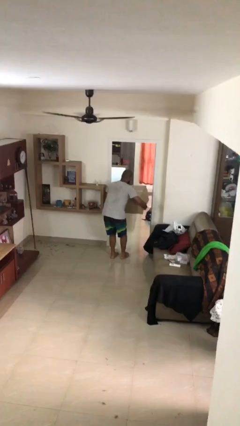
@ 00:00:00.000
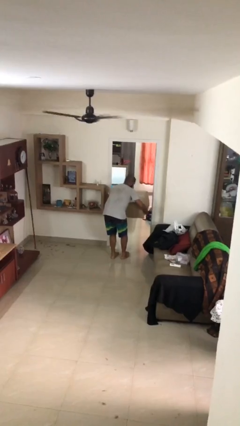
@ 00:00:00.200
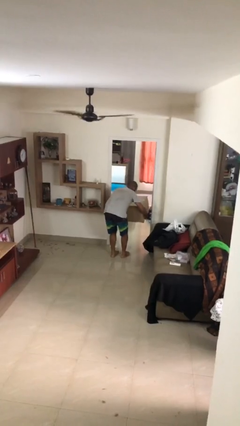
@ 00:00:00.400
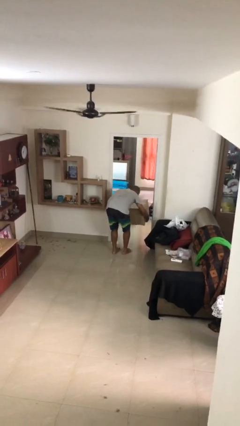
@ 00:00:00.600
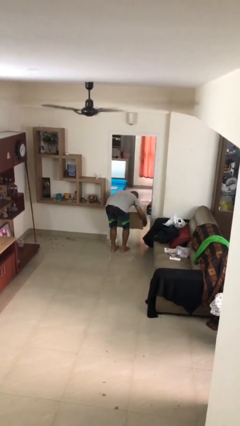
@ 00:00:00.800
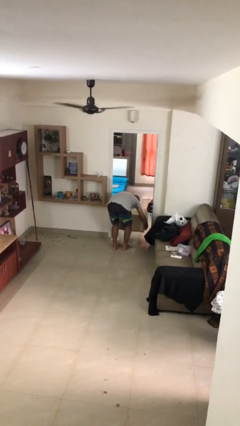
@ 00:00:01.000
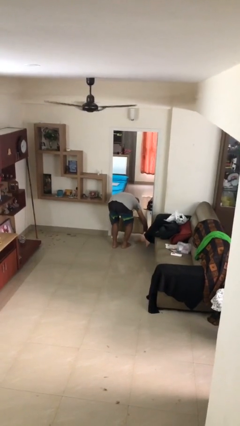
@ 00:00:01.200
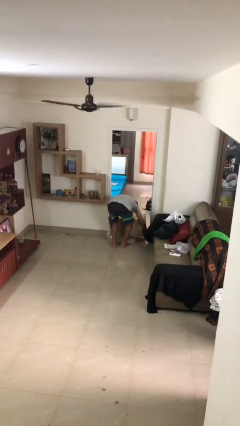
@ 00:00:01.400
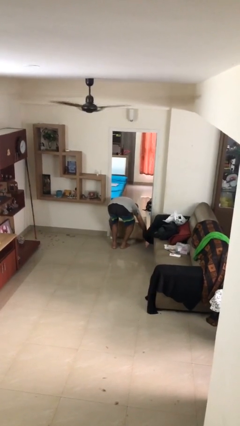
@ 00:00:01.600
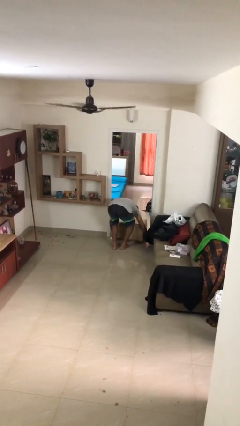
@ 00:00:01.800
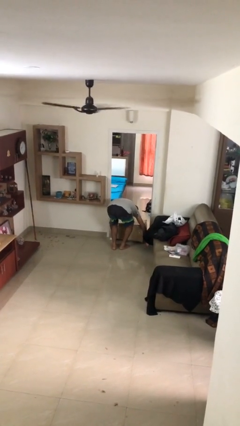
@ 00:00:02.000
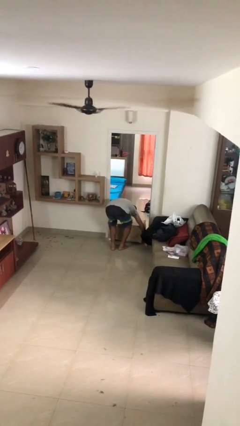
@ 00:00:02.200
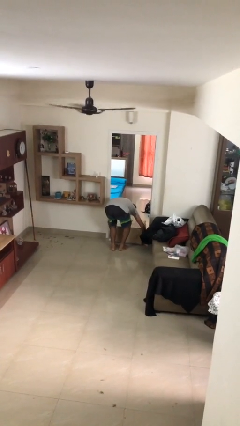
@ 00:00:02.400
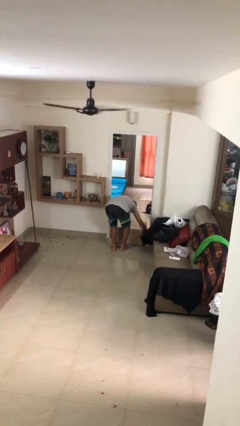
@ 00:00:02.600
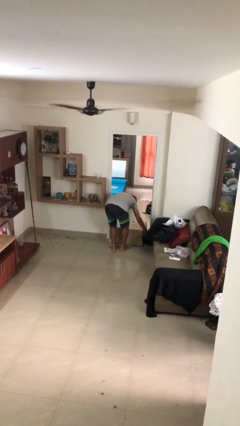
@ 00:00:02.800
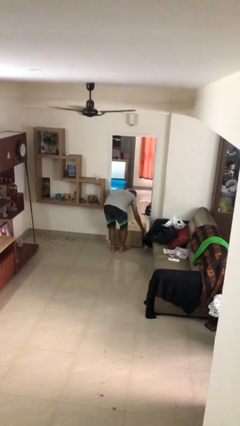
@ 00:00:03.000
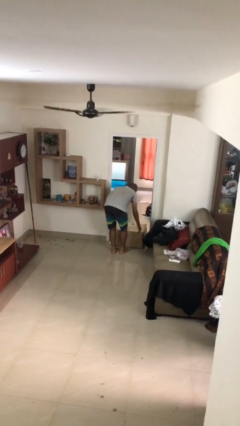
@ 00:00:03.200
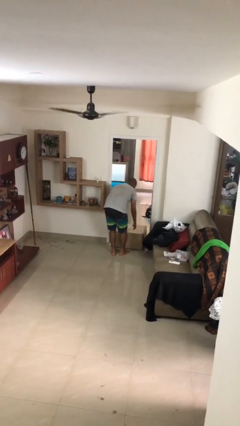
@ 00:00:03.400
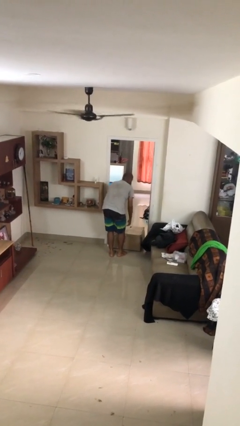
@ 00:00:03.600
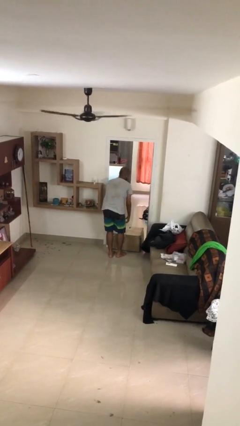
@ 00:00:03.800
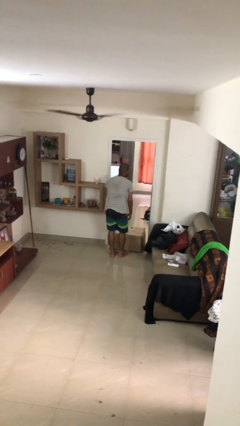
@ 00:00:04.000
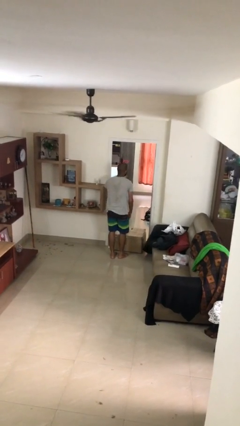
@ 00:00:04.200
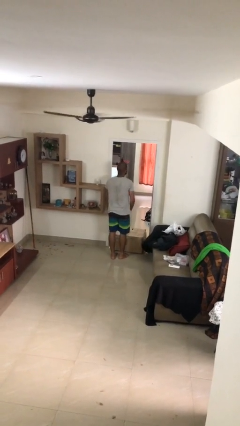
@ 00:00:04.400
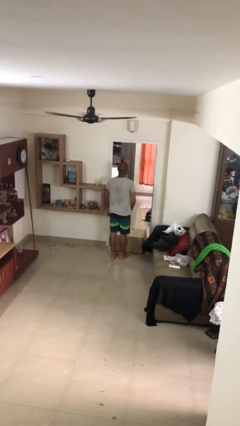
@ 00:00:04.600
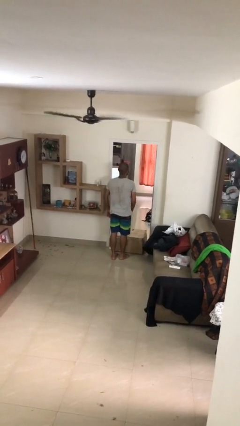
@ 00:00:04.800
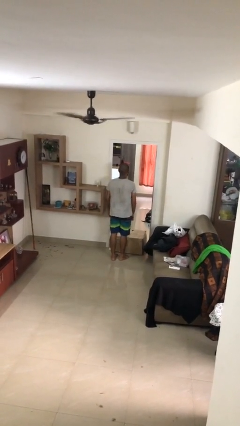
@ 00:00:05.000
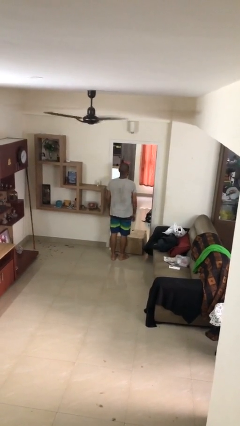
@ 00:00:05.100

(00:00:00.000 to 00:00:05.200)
person puts down object on floor

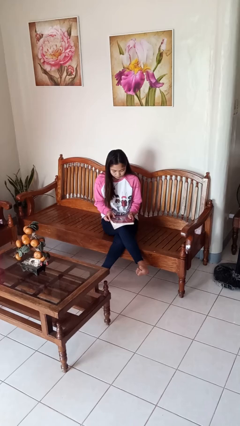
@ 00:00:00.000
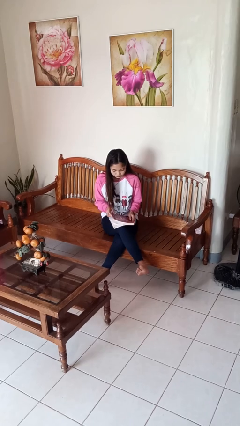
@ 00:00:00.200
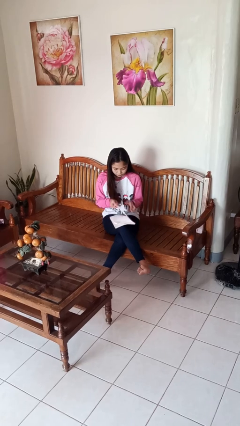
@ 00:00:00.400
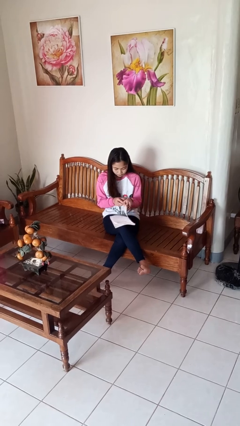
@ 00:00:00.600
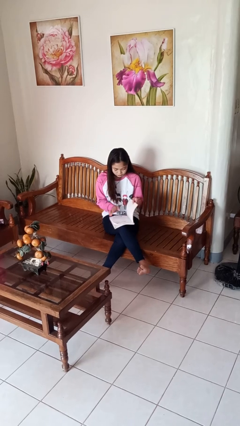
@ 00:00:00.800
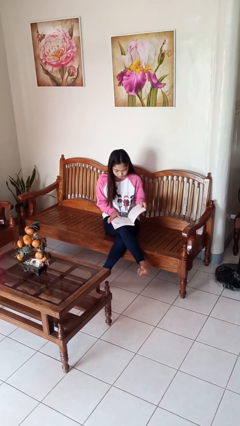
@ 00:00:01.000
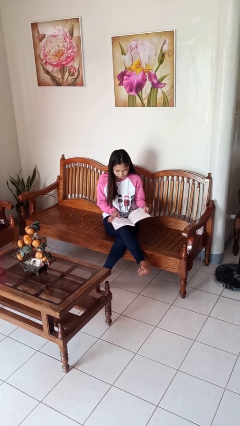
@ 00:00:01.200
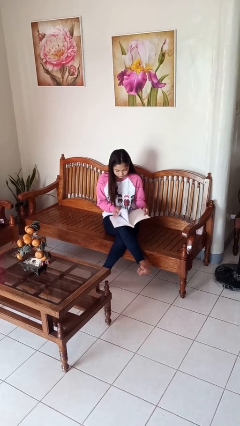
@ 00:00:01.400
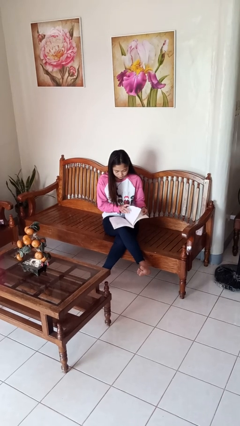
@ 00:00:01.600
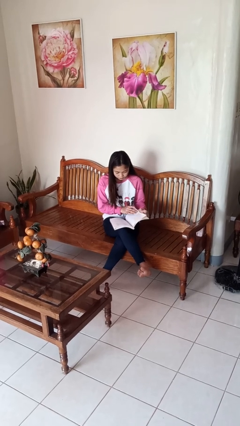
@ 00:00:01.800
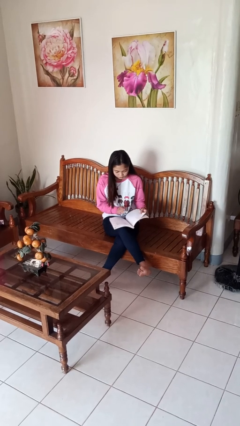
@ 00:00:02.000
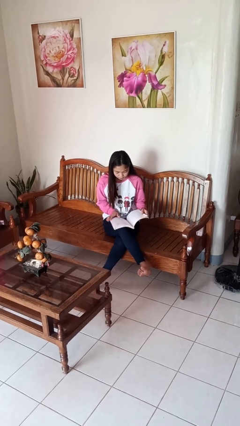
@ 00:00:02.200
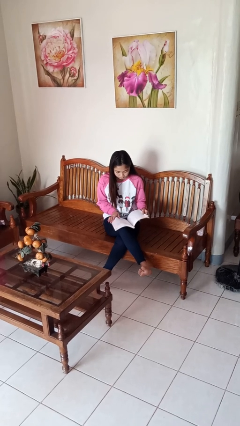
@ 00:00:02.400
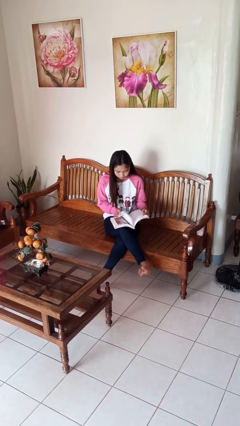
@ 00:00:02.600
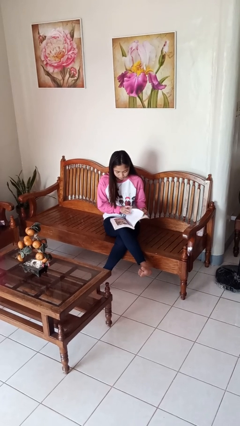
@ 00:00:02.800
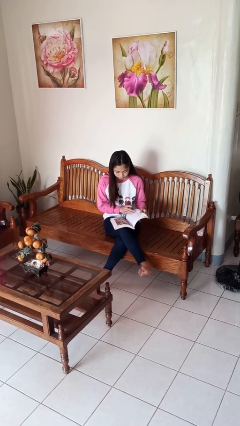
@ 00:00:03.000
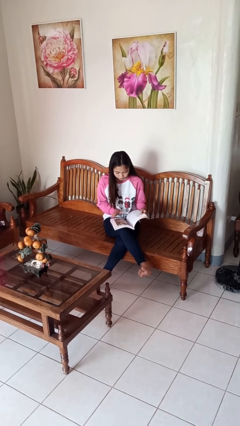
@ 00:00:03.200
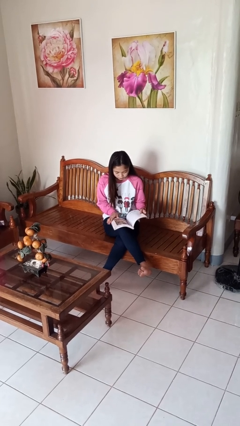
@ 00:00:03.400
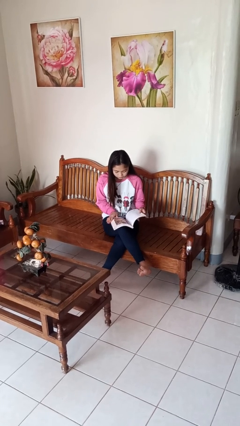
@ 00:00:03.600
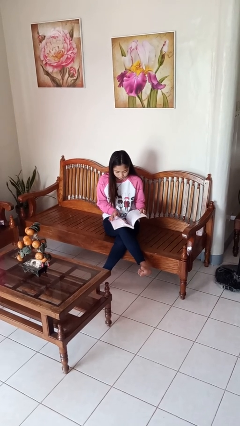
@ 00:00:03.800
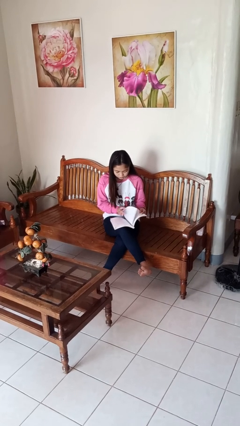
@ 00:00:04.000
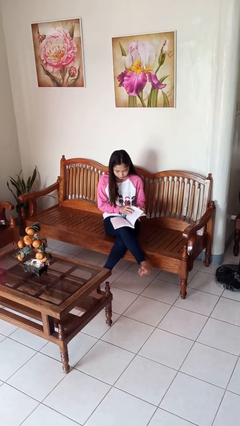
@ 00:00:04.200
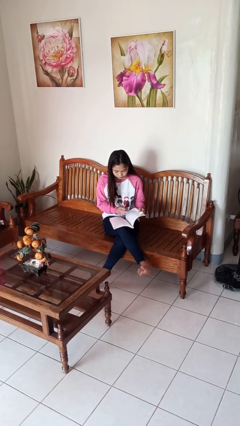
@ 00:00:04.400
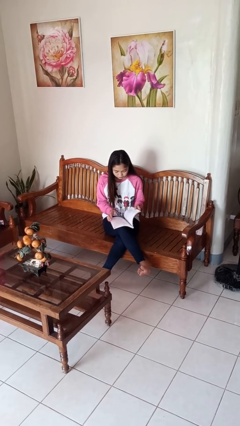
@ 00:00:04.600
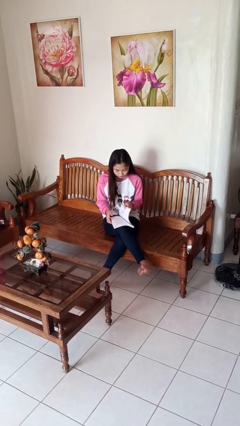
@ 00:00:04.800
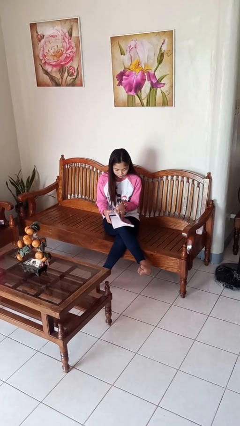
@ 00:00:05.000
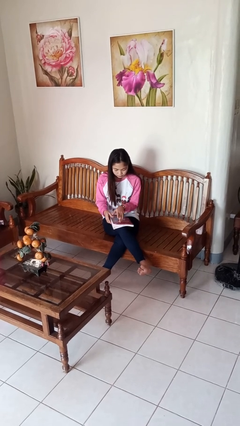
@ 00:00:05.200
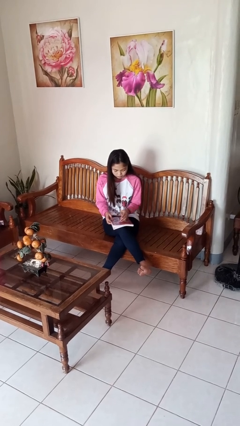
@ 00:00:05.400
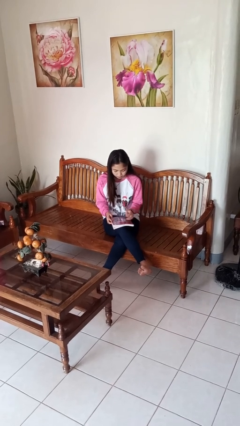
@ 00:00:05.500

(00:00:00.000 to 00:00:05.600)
person reads book

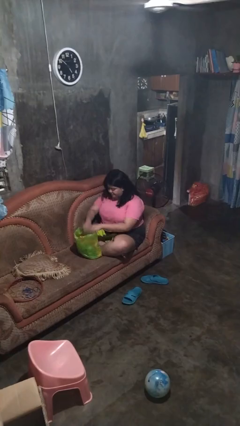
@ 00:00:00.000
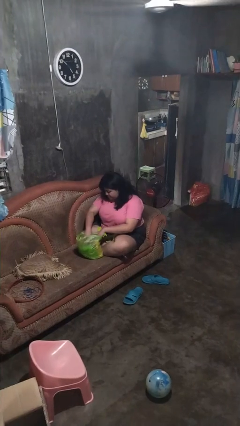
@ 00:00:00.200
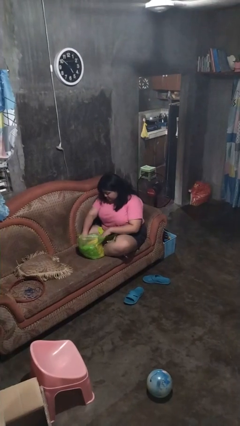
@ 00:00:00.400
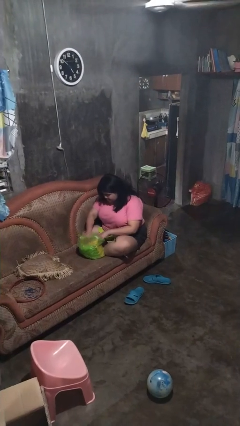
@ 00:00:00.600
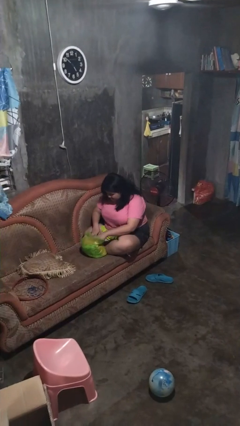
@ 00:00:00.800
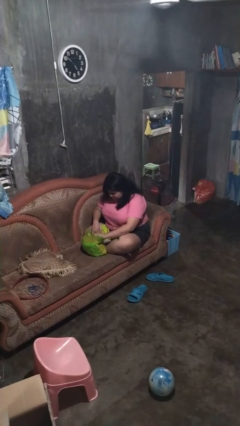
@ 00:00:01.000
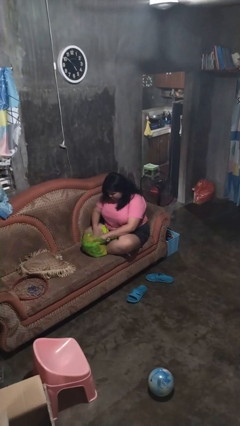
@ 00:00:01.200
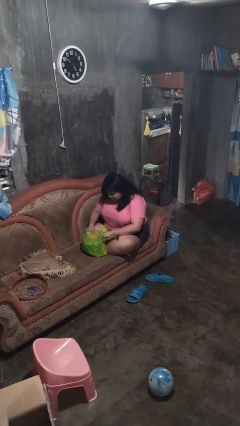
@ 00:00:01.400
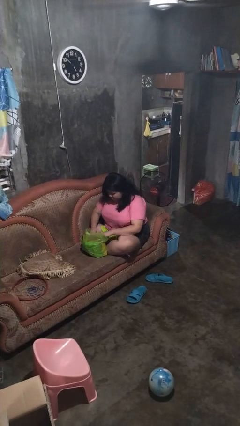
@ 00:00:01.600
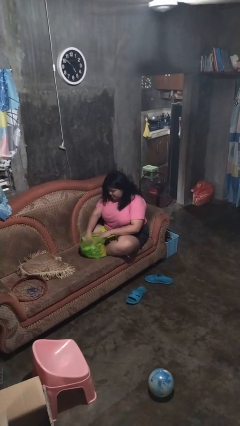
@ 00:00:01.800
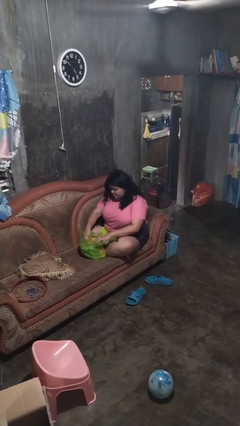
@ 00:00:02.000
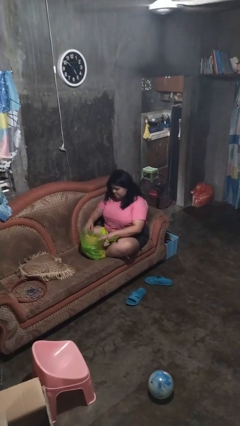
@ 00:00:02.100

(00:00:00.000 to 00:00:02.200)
person searches in bag

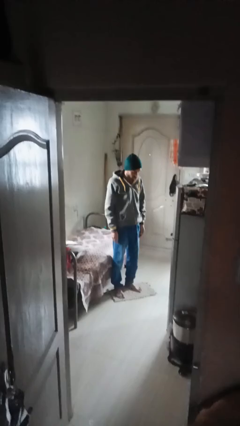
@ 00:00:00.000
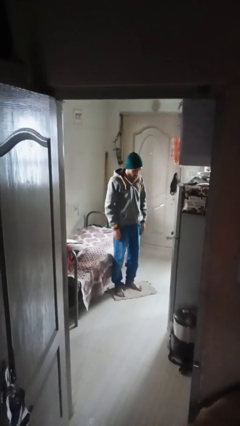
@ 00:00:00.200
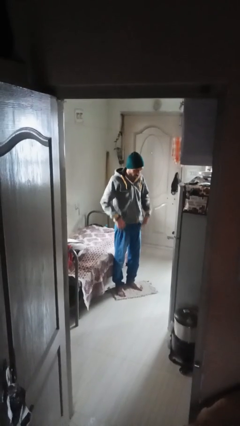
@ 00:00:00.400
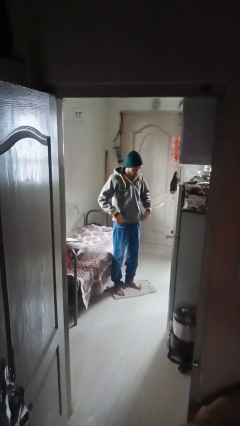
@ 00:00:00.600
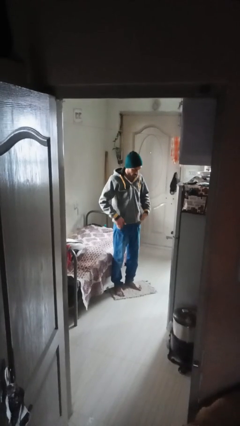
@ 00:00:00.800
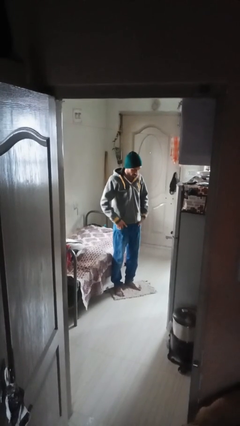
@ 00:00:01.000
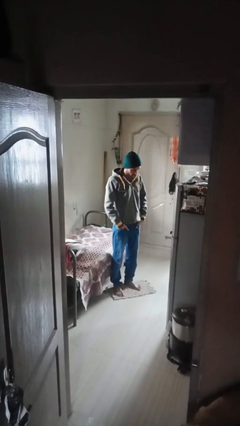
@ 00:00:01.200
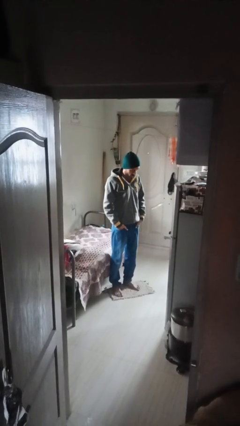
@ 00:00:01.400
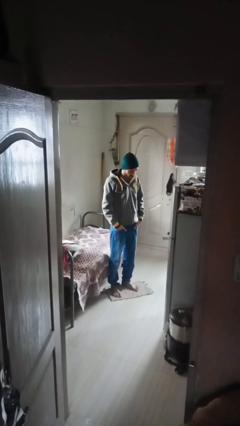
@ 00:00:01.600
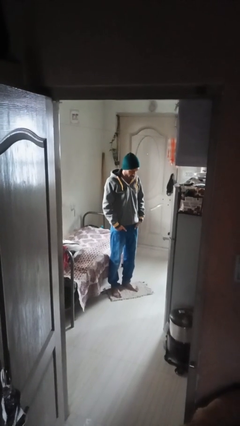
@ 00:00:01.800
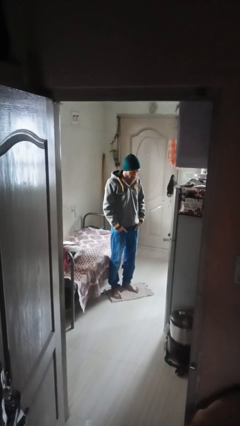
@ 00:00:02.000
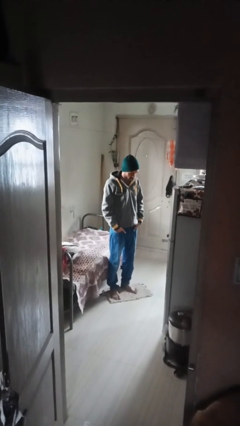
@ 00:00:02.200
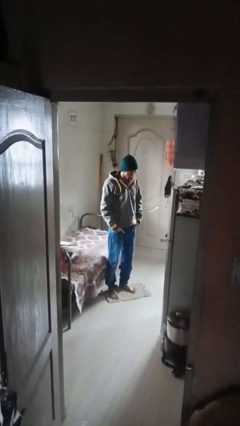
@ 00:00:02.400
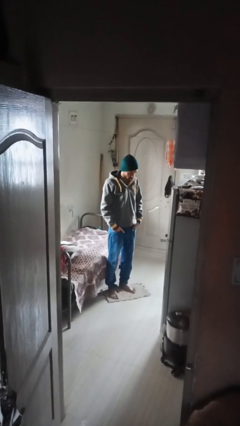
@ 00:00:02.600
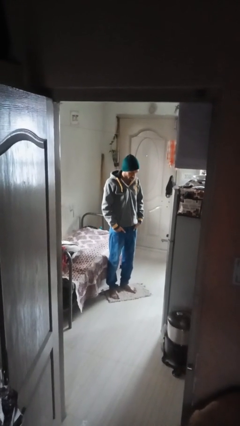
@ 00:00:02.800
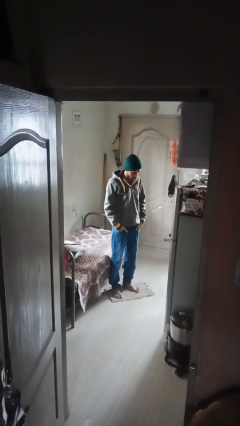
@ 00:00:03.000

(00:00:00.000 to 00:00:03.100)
person puts hands in back pockets

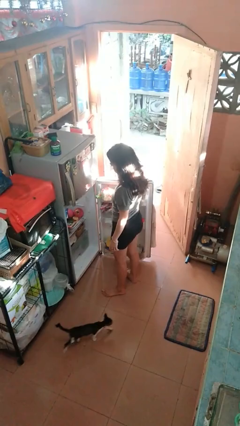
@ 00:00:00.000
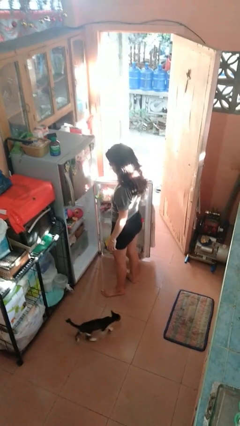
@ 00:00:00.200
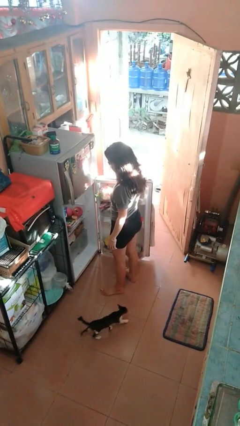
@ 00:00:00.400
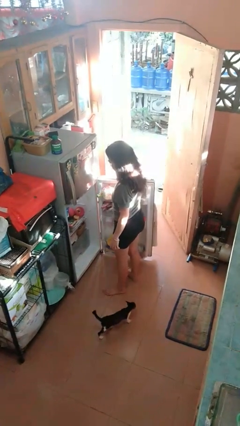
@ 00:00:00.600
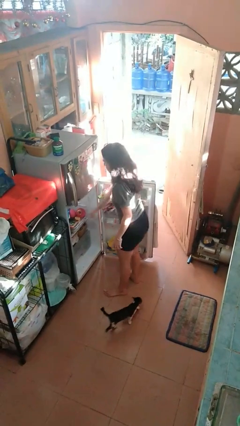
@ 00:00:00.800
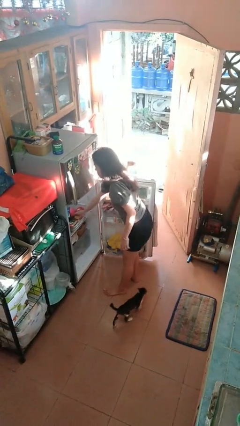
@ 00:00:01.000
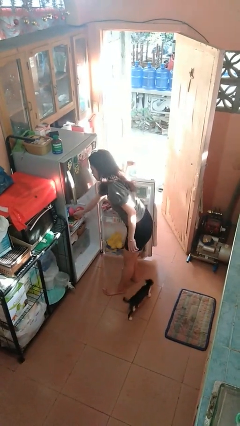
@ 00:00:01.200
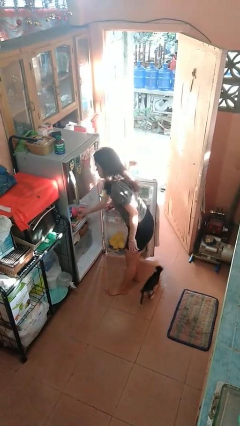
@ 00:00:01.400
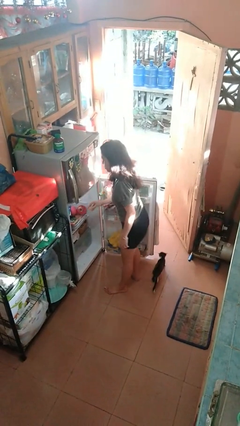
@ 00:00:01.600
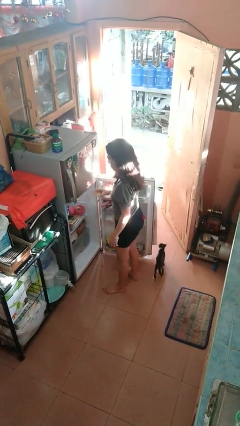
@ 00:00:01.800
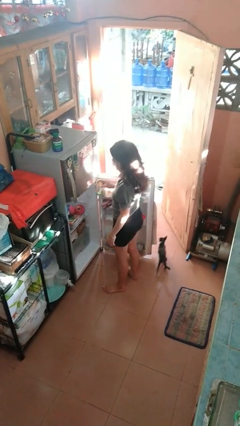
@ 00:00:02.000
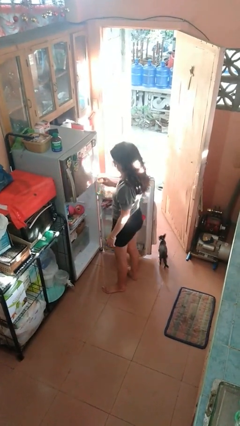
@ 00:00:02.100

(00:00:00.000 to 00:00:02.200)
person takes object from refrigerator
